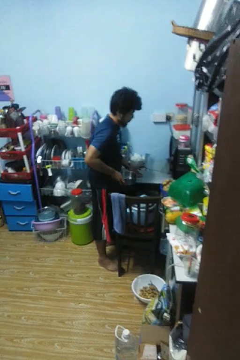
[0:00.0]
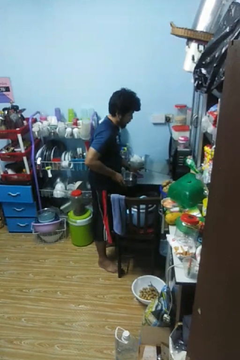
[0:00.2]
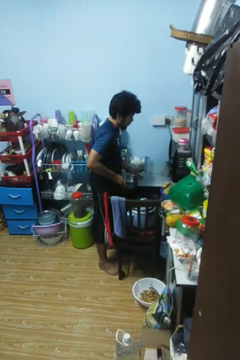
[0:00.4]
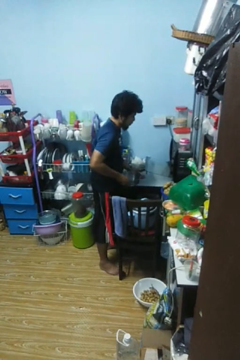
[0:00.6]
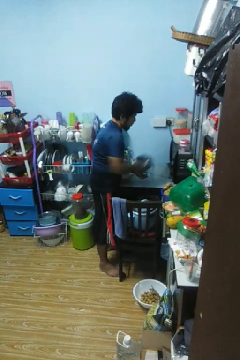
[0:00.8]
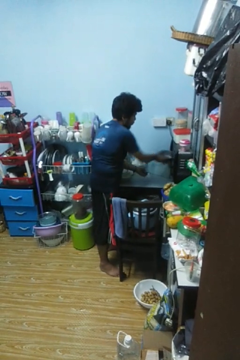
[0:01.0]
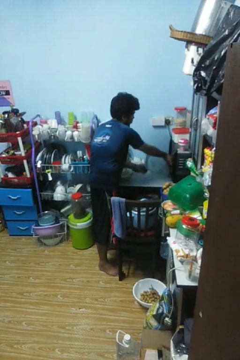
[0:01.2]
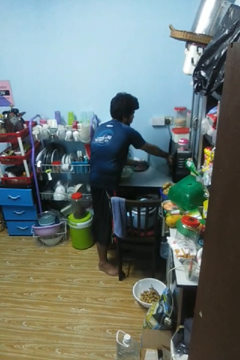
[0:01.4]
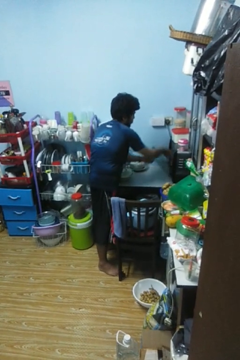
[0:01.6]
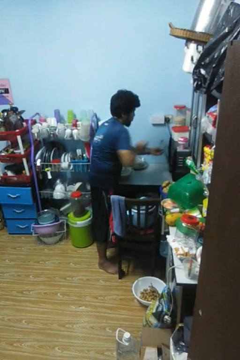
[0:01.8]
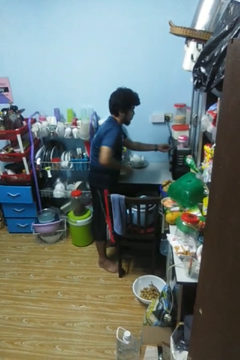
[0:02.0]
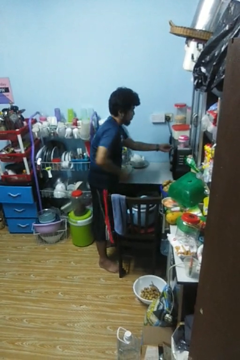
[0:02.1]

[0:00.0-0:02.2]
person puts object into oven

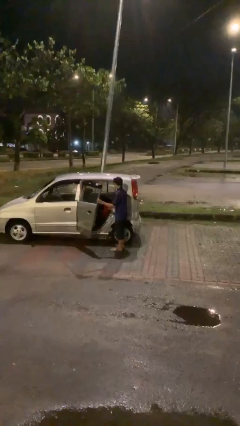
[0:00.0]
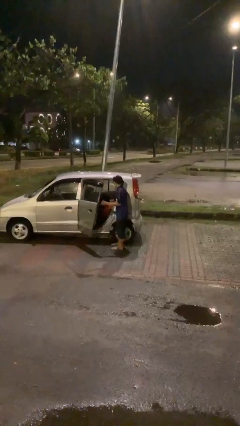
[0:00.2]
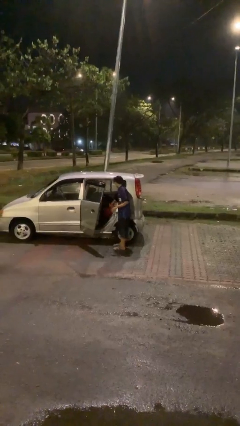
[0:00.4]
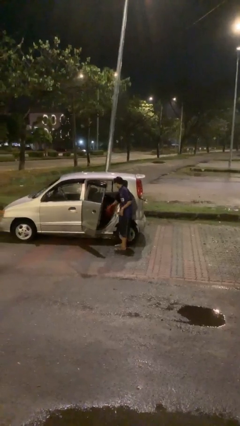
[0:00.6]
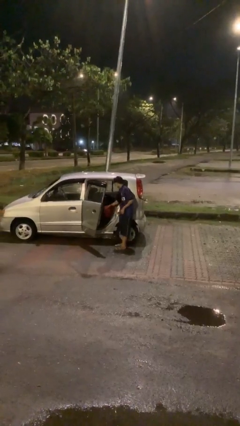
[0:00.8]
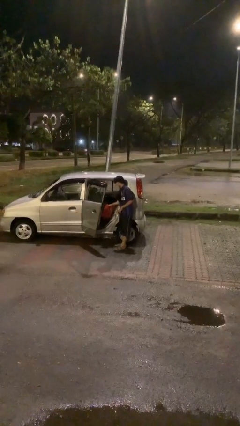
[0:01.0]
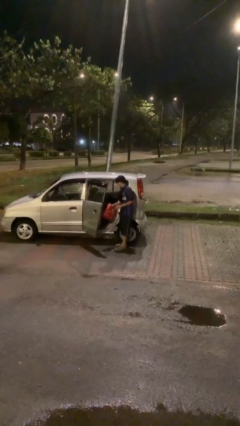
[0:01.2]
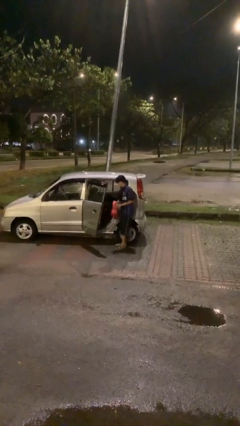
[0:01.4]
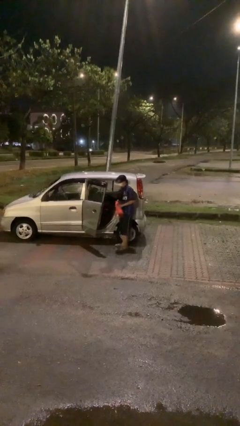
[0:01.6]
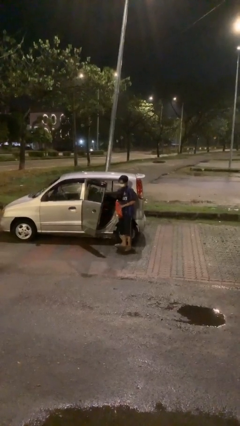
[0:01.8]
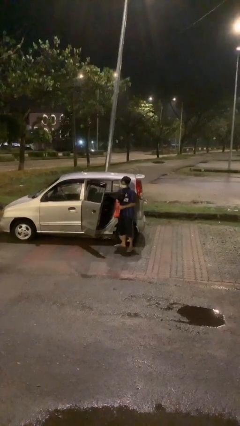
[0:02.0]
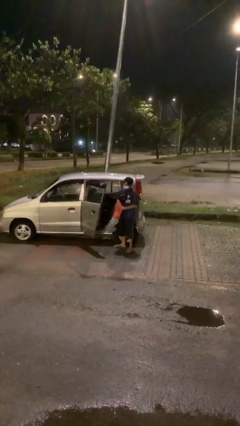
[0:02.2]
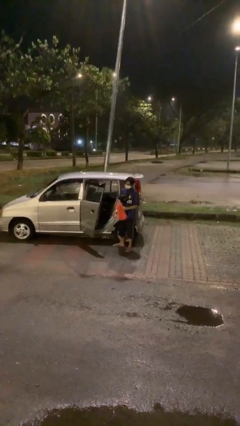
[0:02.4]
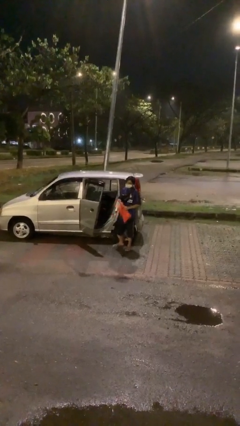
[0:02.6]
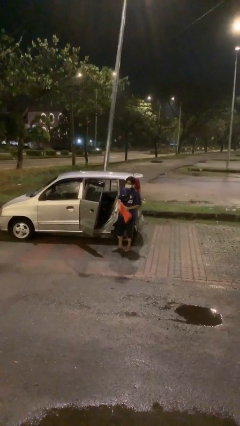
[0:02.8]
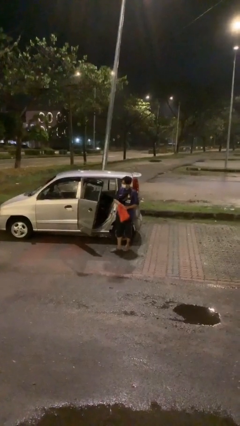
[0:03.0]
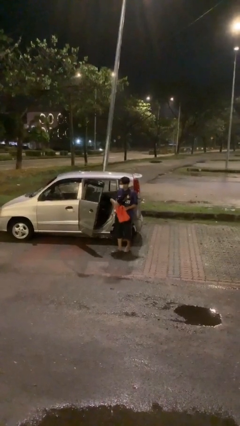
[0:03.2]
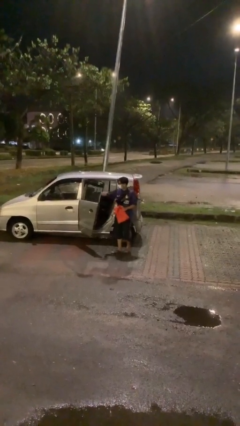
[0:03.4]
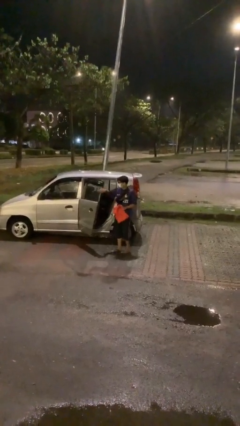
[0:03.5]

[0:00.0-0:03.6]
person unloads car

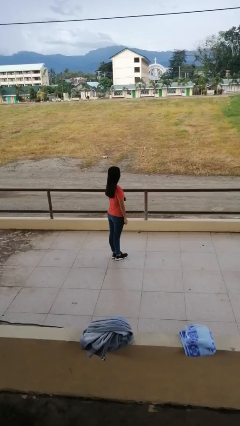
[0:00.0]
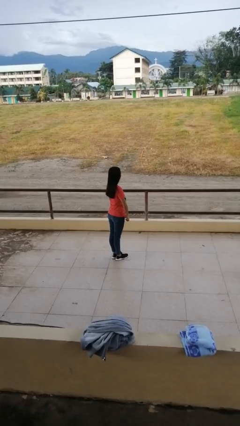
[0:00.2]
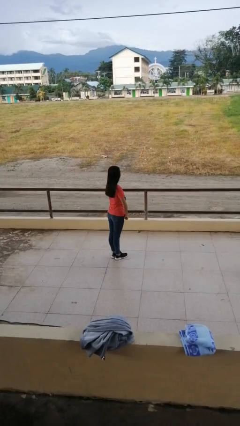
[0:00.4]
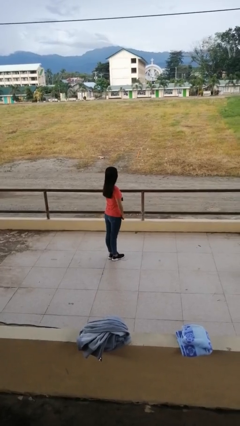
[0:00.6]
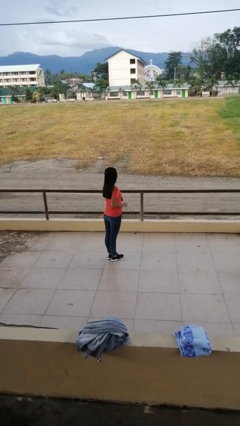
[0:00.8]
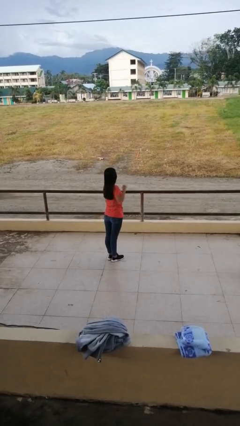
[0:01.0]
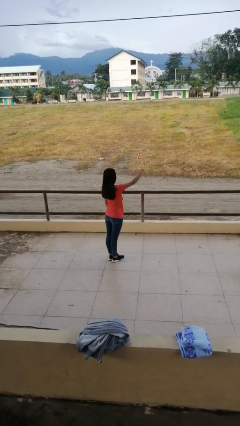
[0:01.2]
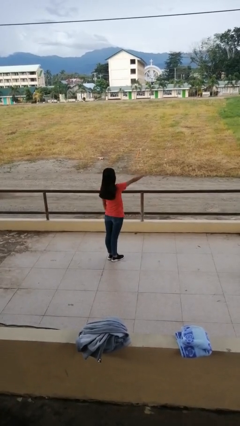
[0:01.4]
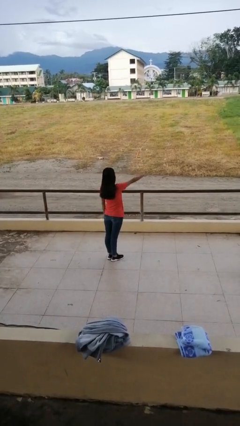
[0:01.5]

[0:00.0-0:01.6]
person punches

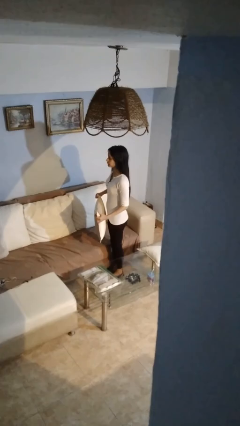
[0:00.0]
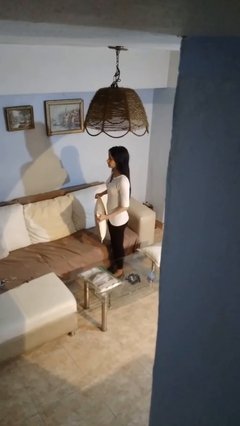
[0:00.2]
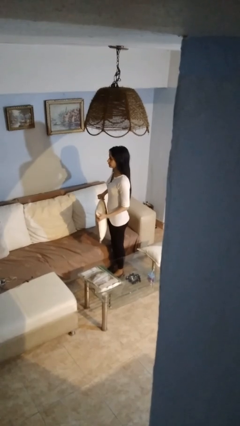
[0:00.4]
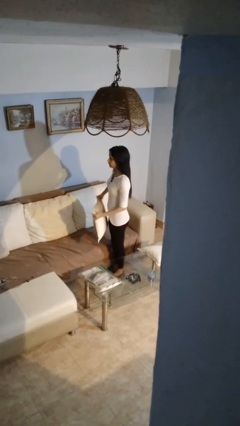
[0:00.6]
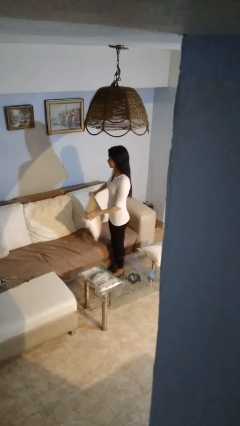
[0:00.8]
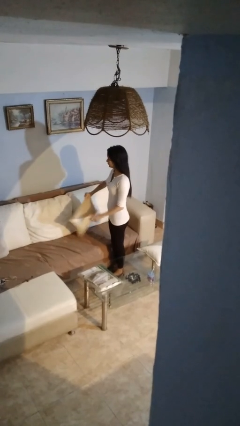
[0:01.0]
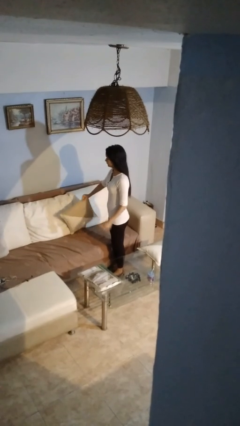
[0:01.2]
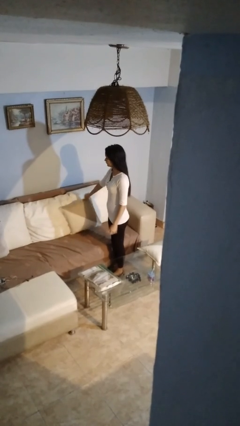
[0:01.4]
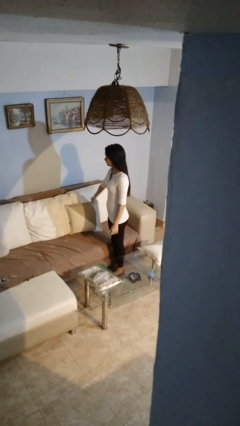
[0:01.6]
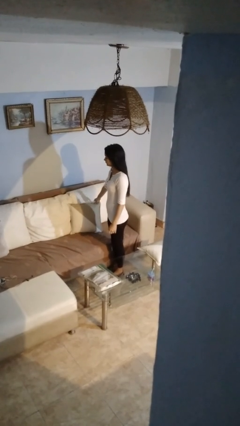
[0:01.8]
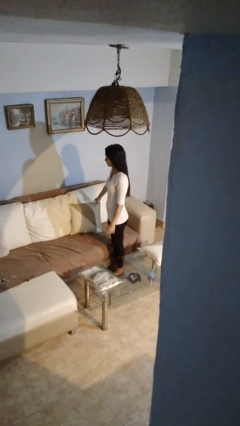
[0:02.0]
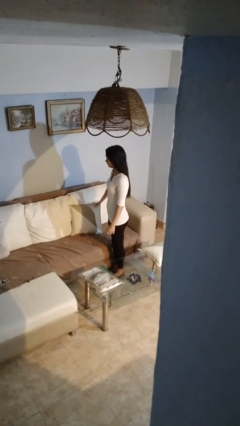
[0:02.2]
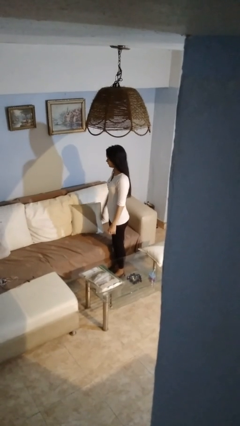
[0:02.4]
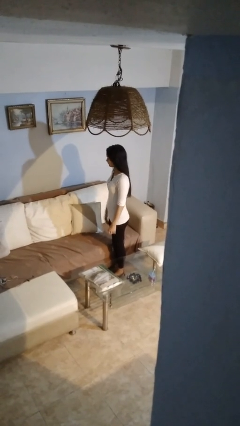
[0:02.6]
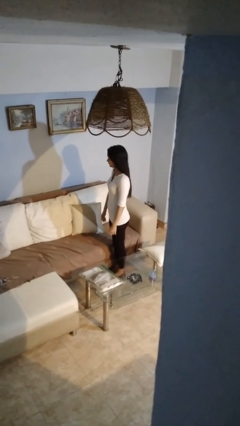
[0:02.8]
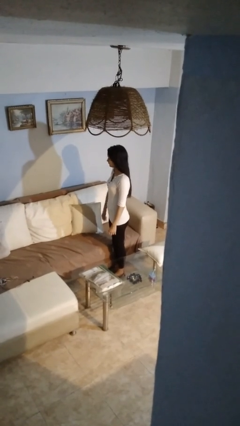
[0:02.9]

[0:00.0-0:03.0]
person picks up object from couch

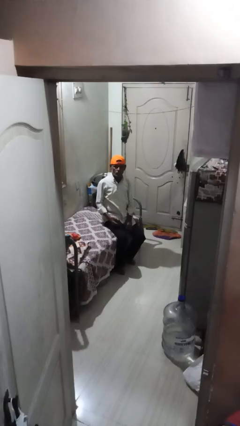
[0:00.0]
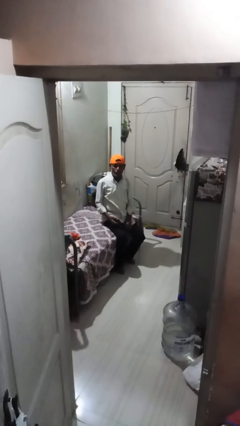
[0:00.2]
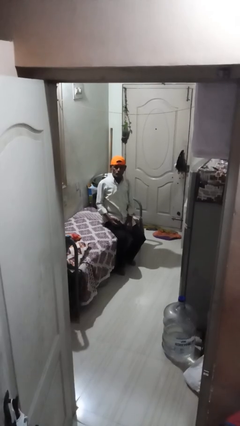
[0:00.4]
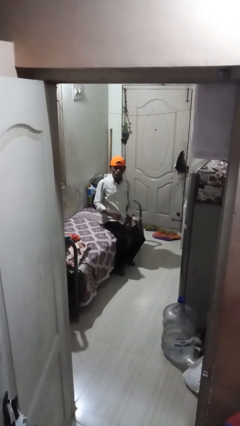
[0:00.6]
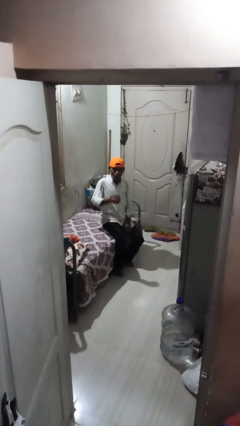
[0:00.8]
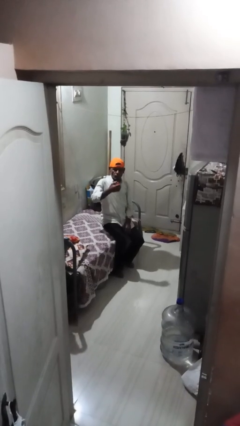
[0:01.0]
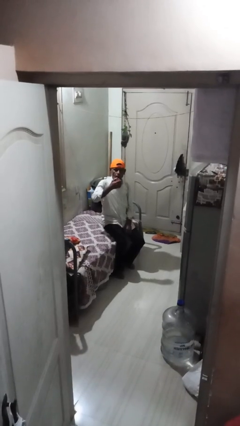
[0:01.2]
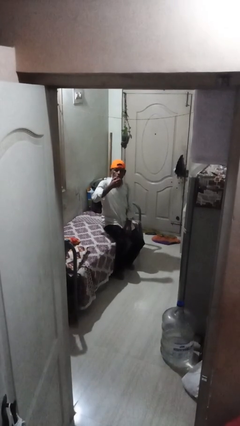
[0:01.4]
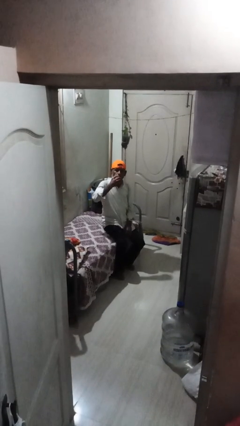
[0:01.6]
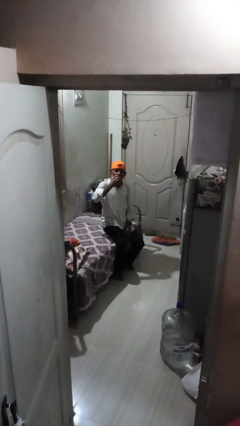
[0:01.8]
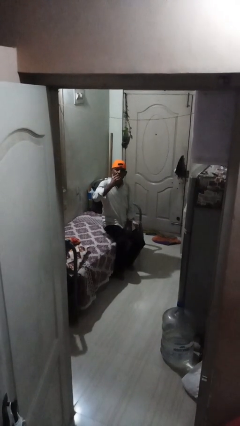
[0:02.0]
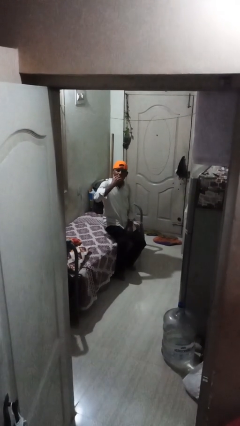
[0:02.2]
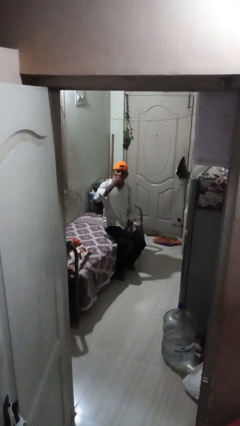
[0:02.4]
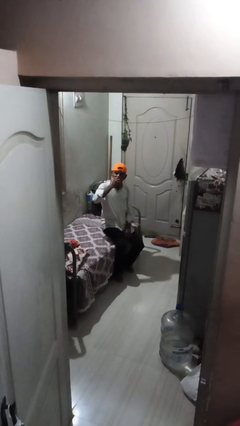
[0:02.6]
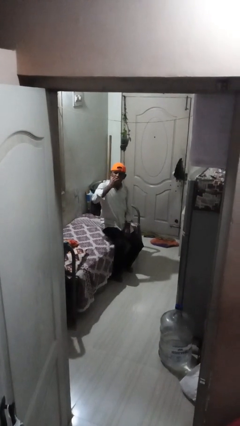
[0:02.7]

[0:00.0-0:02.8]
person eats apple

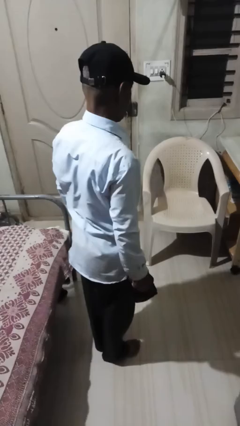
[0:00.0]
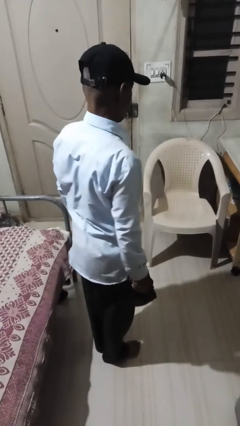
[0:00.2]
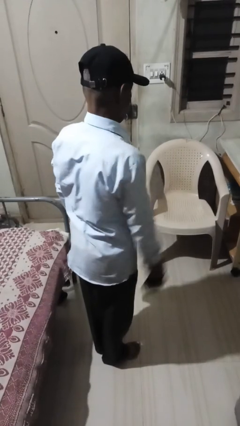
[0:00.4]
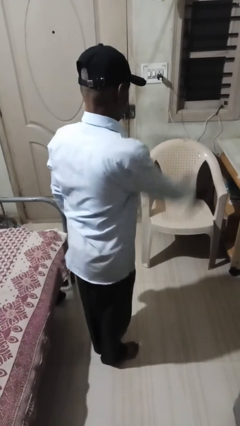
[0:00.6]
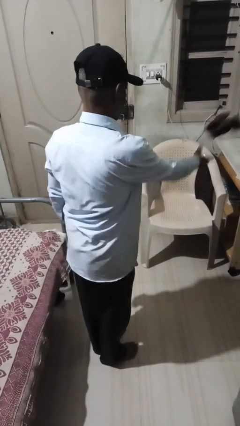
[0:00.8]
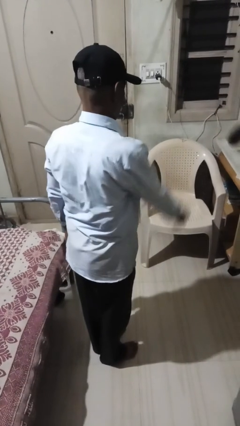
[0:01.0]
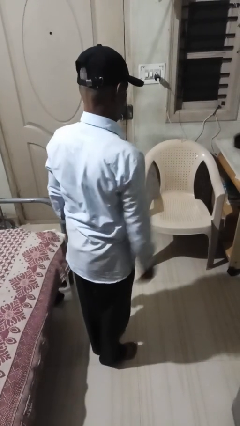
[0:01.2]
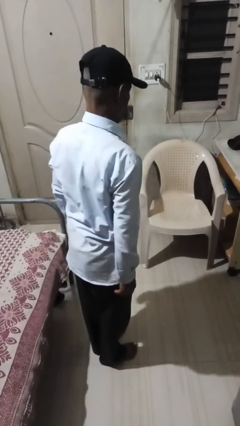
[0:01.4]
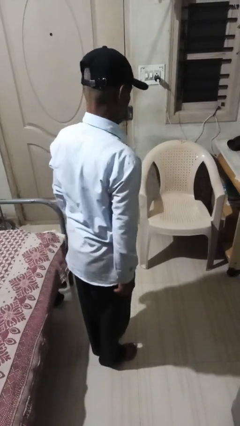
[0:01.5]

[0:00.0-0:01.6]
person throws object on table

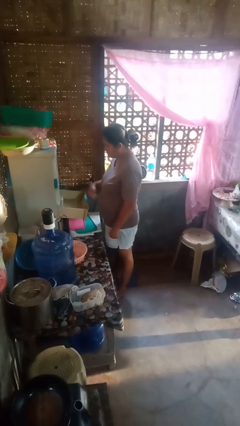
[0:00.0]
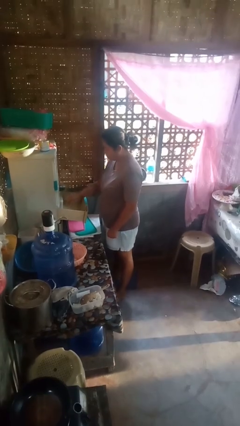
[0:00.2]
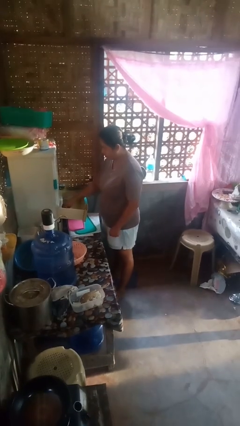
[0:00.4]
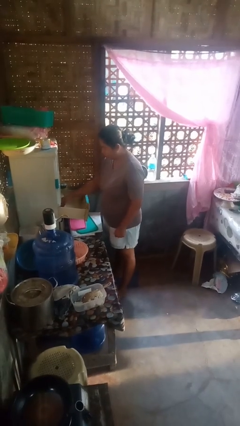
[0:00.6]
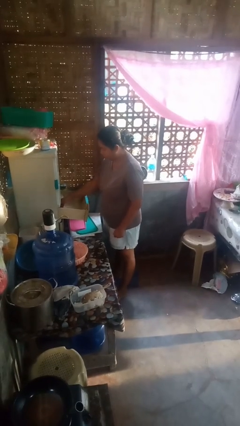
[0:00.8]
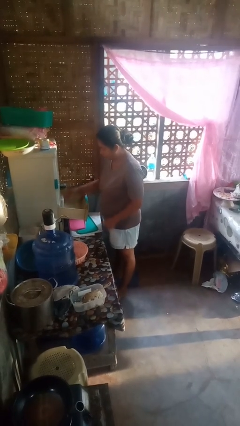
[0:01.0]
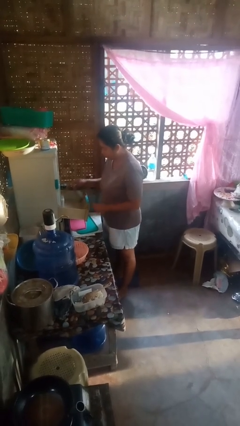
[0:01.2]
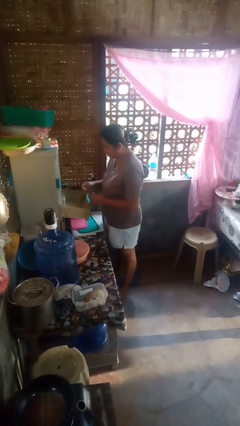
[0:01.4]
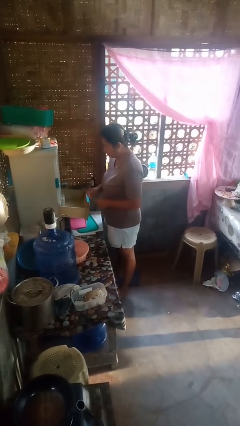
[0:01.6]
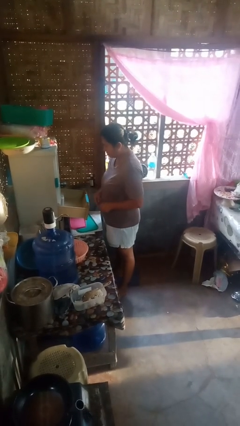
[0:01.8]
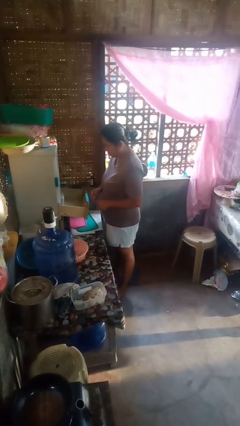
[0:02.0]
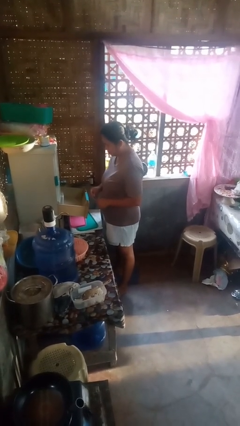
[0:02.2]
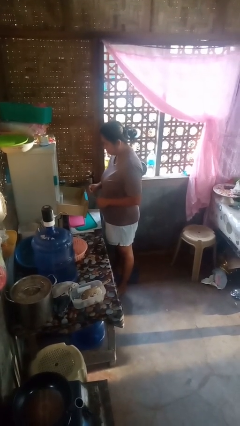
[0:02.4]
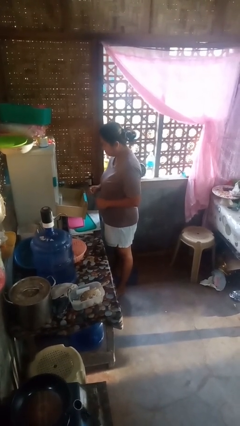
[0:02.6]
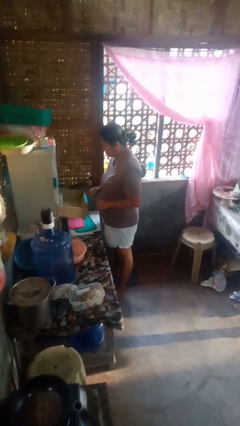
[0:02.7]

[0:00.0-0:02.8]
person takes object from kitchen drawer
